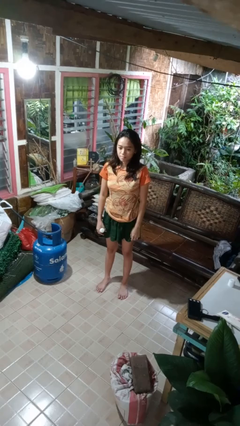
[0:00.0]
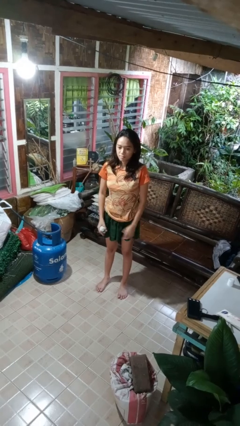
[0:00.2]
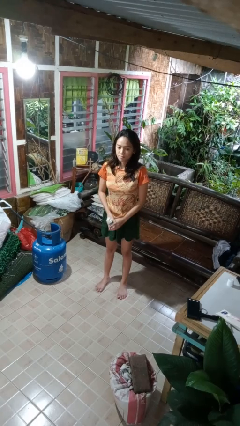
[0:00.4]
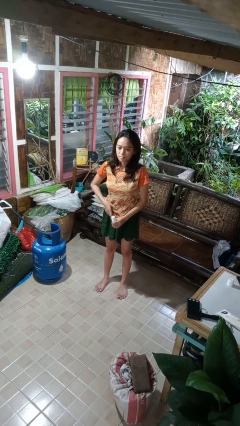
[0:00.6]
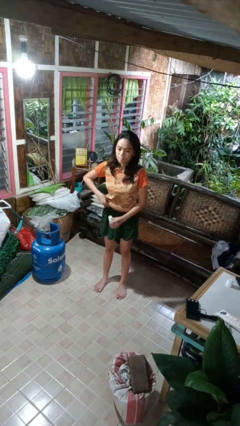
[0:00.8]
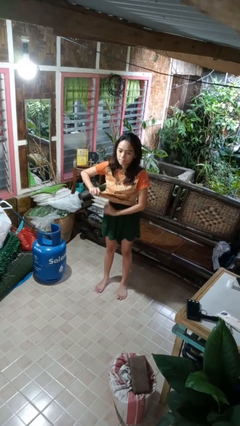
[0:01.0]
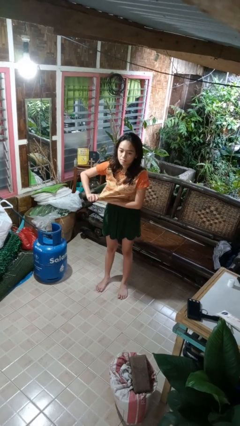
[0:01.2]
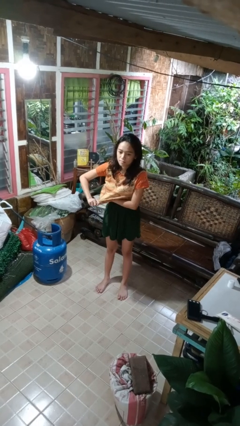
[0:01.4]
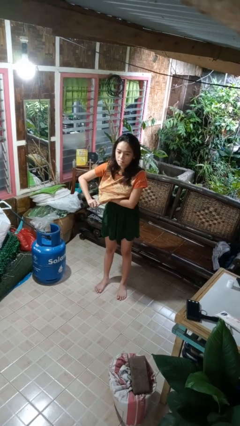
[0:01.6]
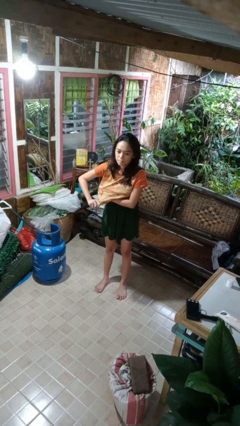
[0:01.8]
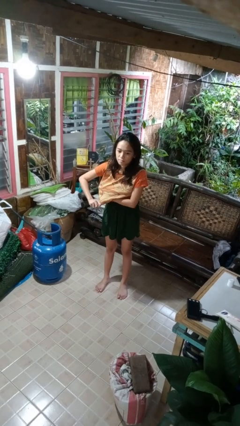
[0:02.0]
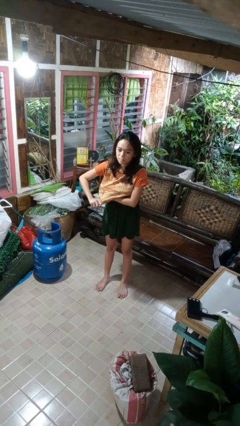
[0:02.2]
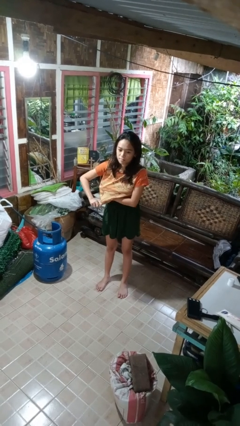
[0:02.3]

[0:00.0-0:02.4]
person applies deodorant

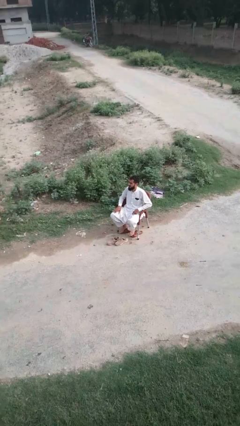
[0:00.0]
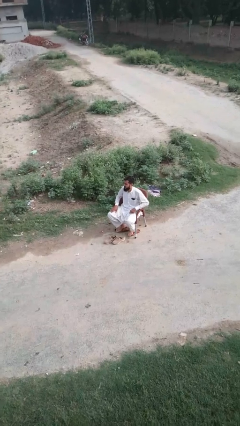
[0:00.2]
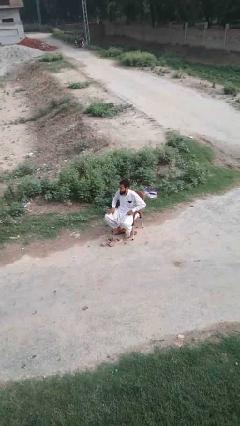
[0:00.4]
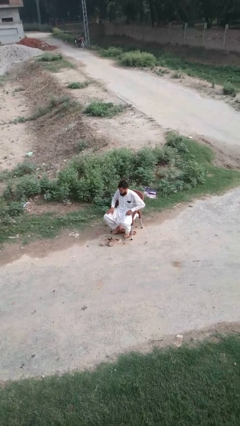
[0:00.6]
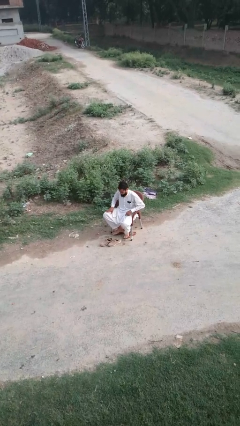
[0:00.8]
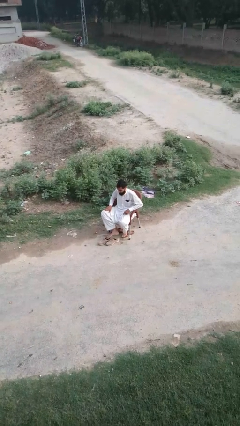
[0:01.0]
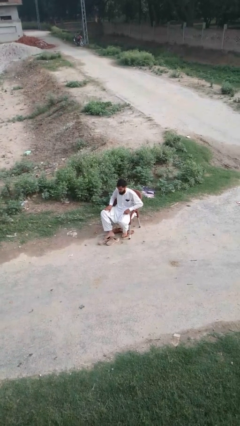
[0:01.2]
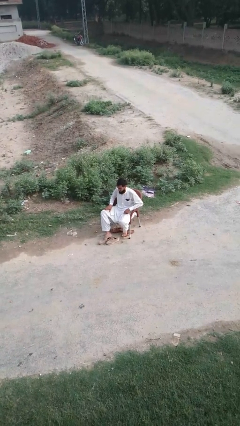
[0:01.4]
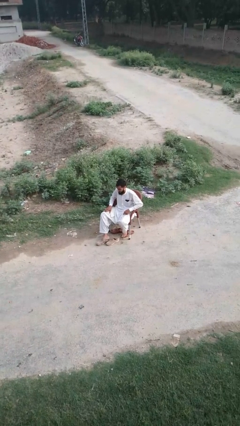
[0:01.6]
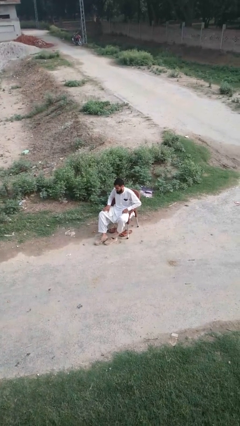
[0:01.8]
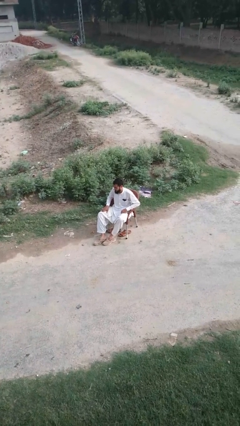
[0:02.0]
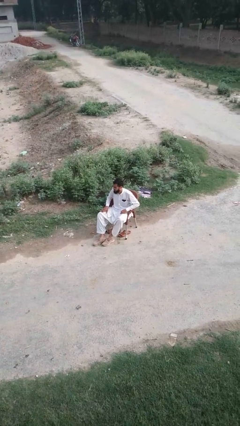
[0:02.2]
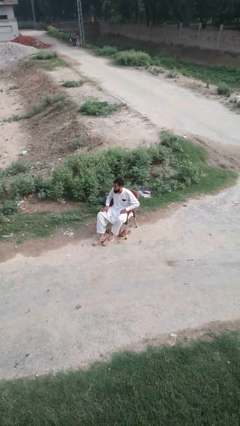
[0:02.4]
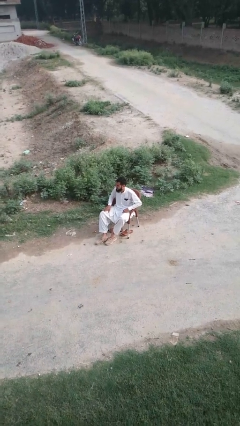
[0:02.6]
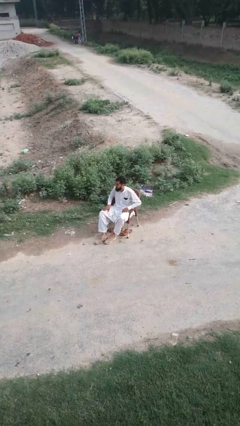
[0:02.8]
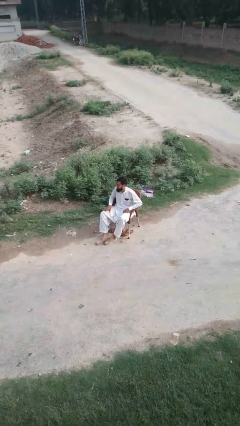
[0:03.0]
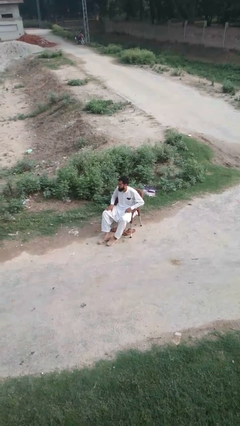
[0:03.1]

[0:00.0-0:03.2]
person puts on shoes

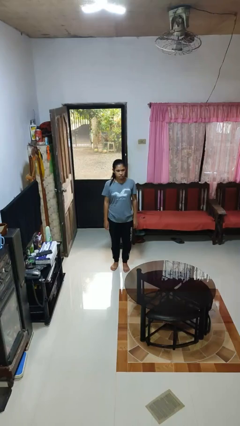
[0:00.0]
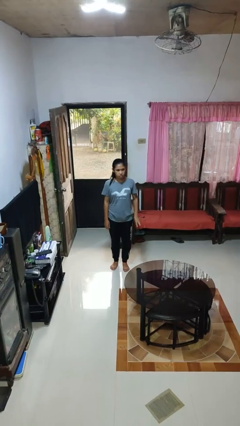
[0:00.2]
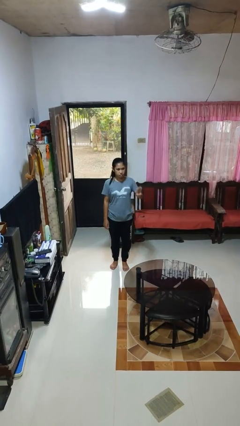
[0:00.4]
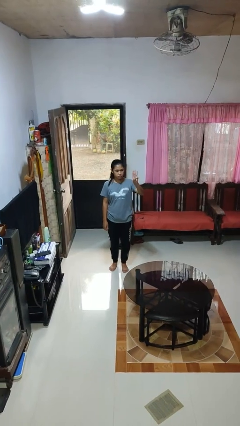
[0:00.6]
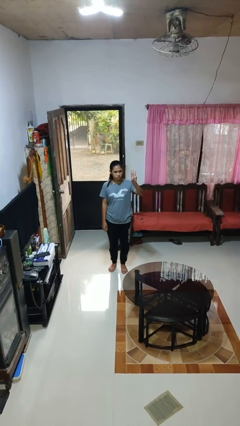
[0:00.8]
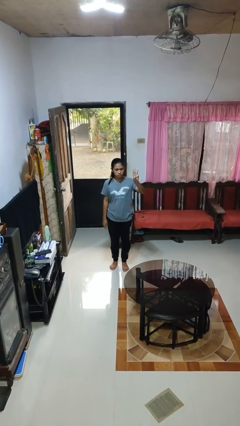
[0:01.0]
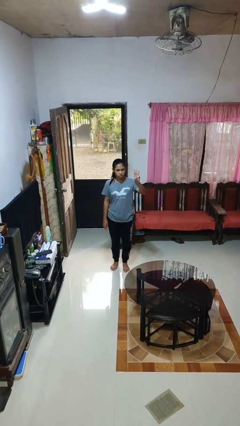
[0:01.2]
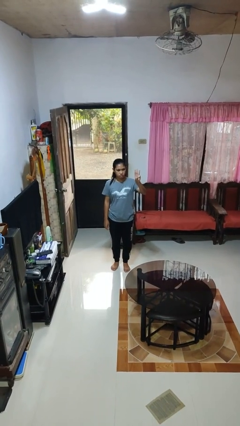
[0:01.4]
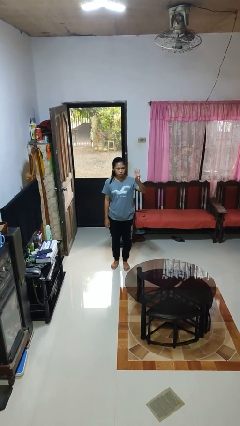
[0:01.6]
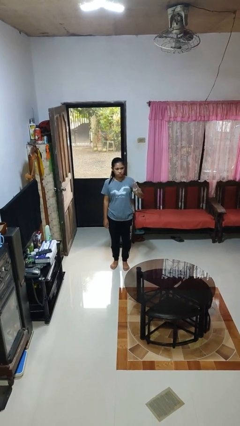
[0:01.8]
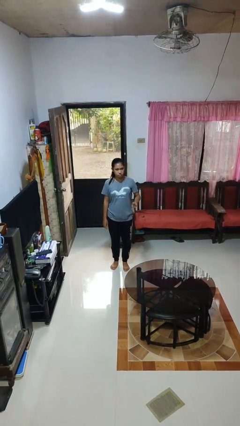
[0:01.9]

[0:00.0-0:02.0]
person gestures number three

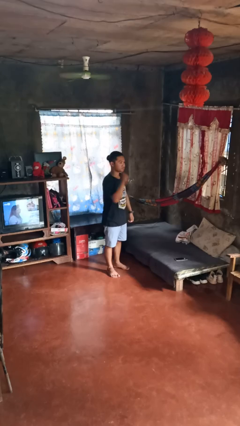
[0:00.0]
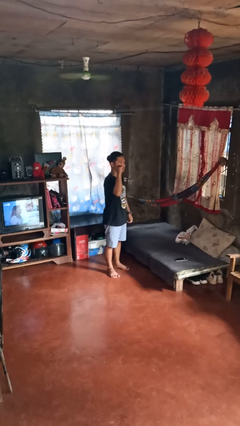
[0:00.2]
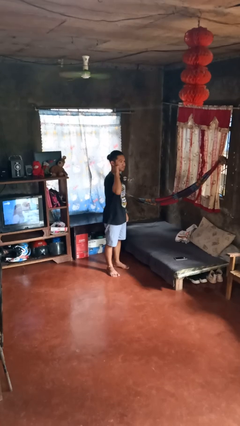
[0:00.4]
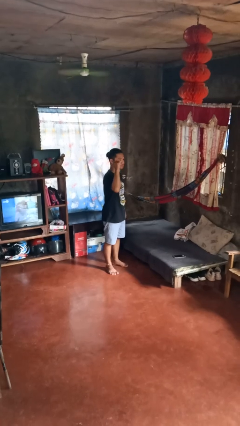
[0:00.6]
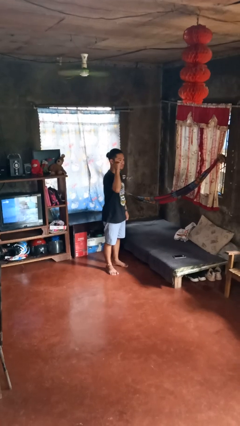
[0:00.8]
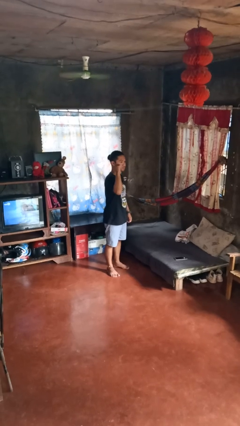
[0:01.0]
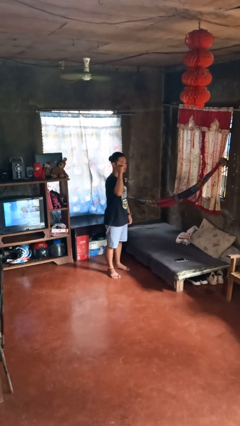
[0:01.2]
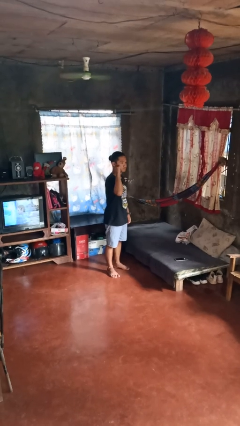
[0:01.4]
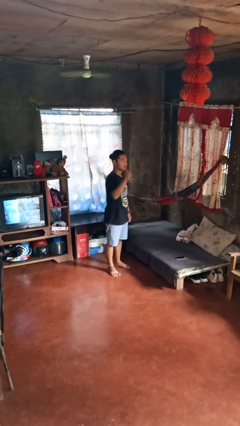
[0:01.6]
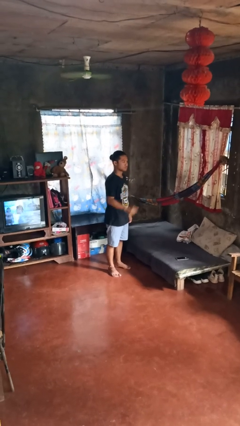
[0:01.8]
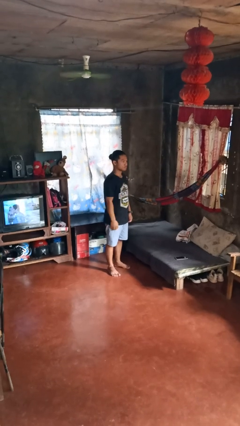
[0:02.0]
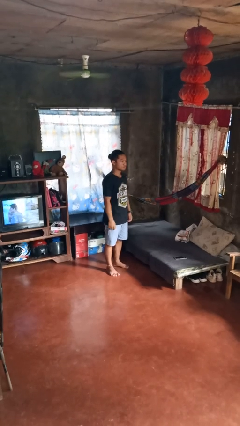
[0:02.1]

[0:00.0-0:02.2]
person gestures behind me

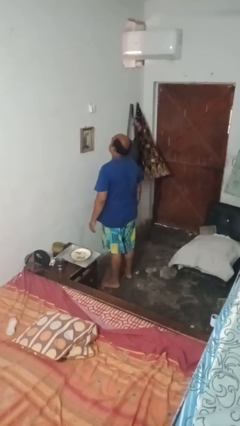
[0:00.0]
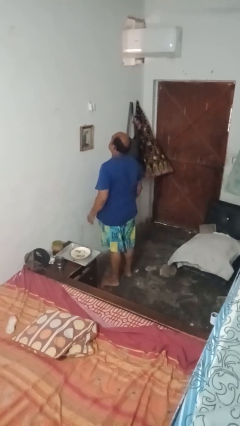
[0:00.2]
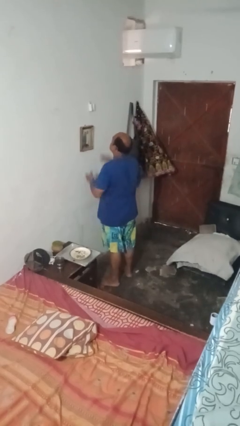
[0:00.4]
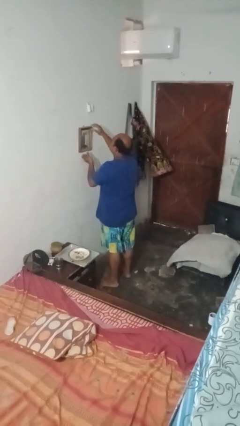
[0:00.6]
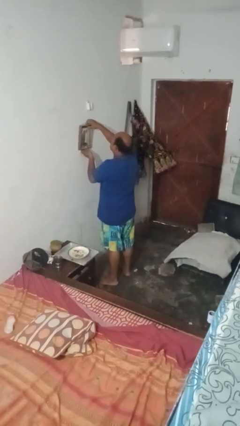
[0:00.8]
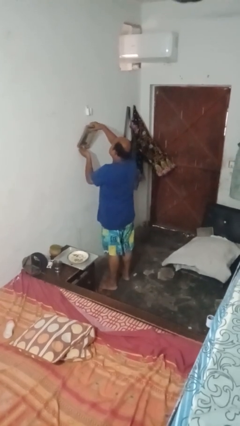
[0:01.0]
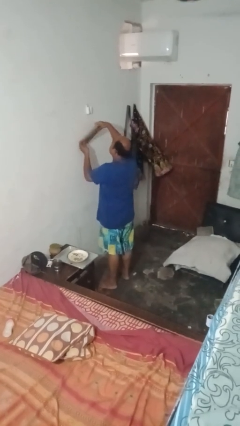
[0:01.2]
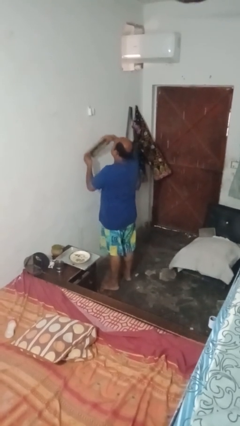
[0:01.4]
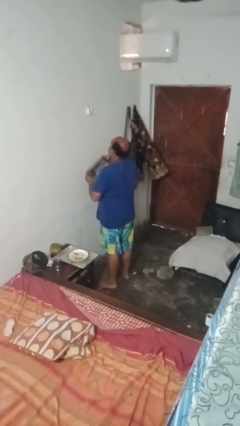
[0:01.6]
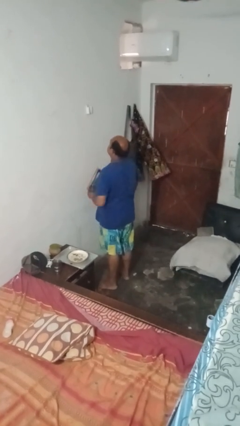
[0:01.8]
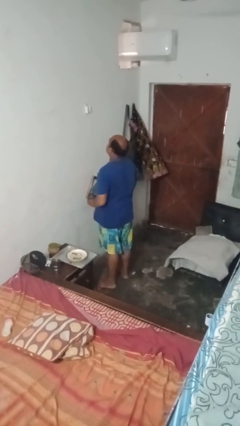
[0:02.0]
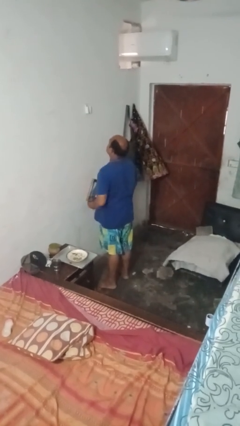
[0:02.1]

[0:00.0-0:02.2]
person takes down picture frame

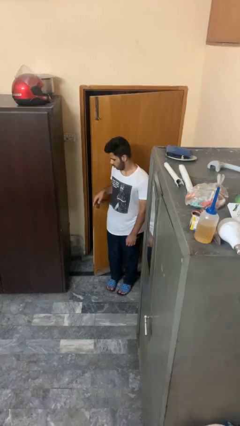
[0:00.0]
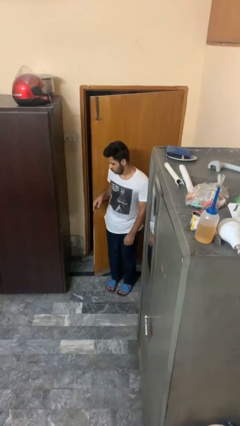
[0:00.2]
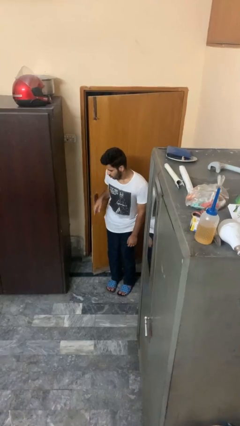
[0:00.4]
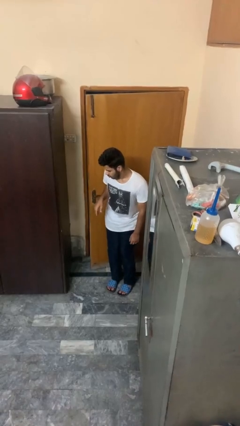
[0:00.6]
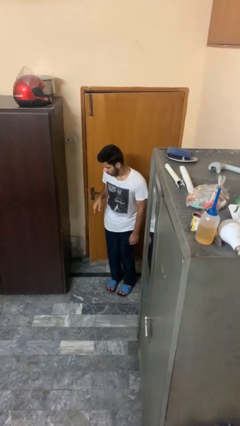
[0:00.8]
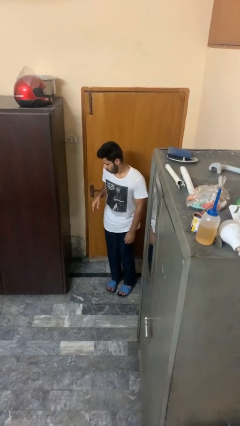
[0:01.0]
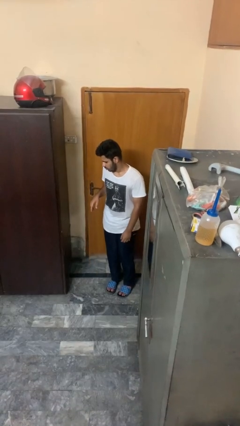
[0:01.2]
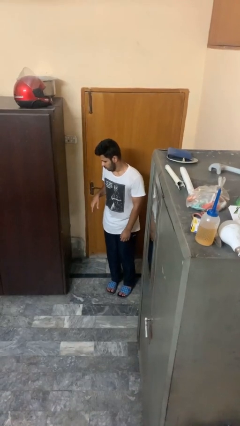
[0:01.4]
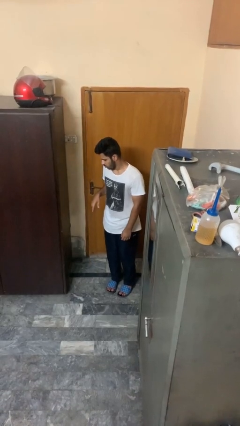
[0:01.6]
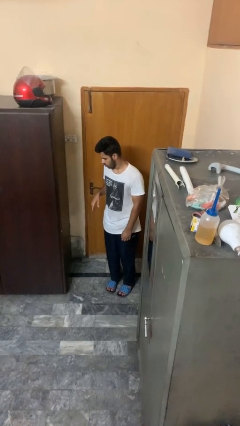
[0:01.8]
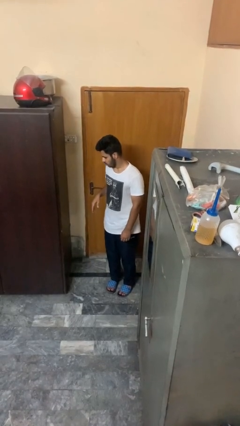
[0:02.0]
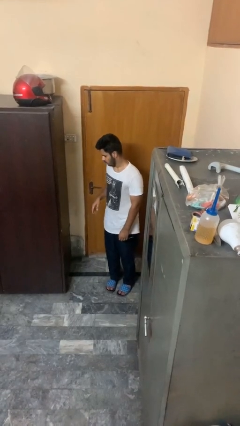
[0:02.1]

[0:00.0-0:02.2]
person closes door with hip

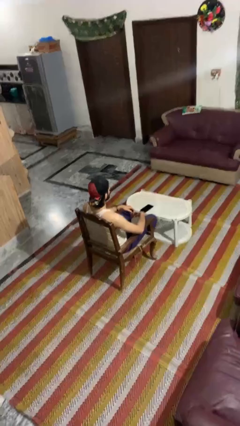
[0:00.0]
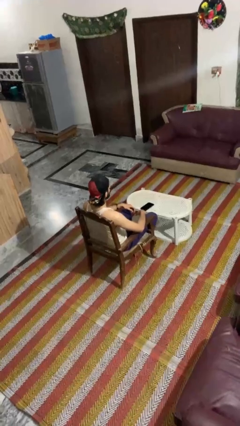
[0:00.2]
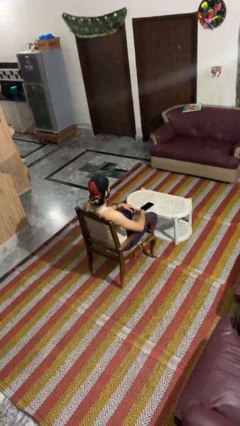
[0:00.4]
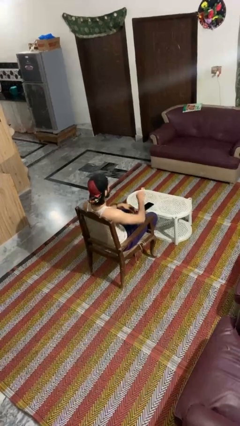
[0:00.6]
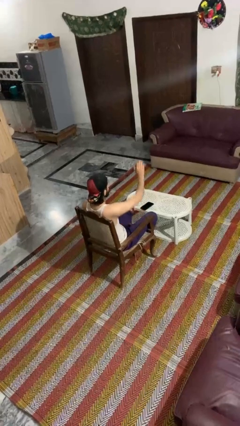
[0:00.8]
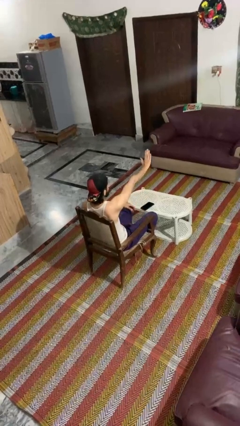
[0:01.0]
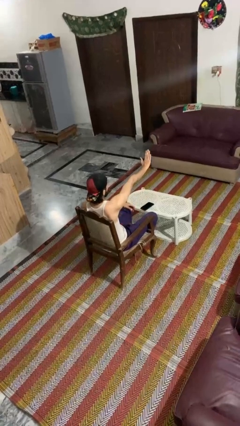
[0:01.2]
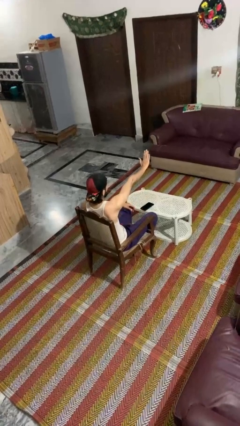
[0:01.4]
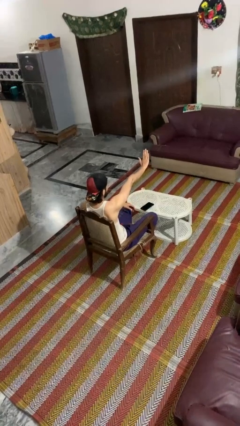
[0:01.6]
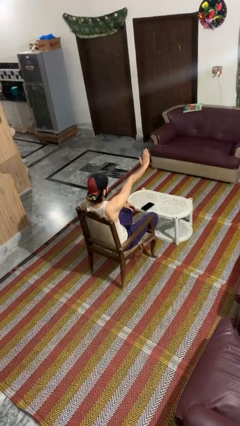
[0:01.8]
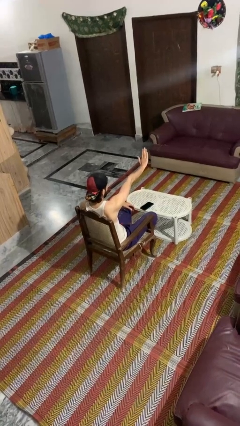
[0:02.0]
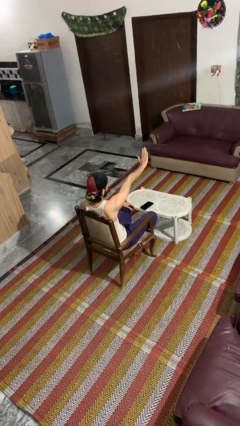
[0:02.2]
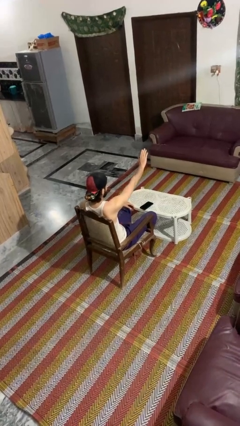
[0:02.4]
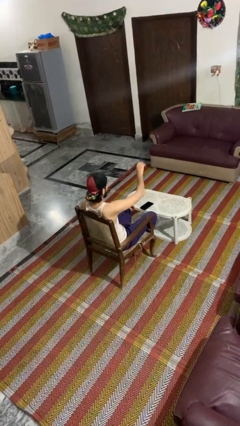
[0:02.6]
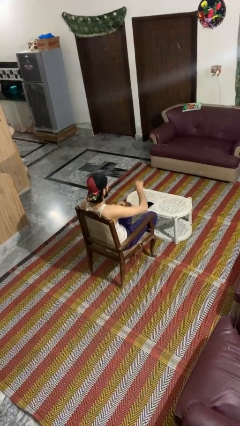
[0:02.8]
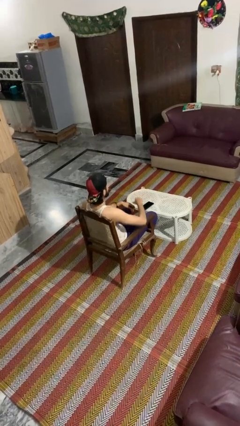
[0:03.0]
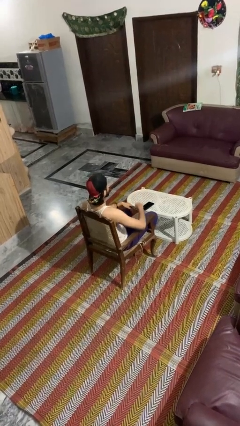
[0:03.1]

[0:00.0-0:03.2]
person gestures stop
